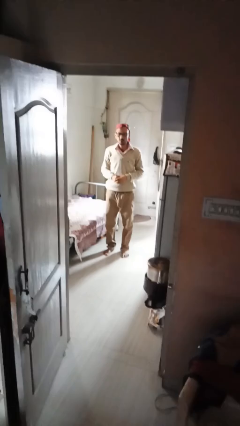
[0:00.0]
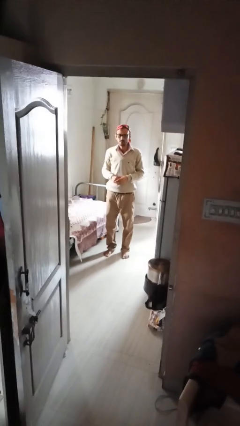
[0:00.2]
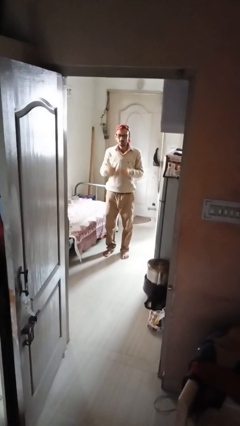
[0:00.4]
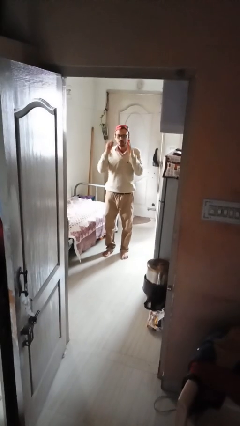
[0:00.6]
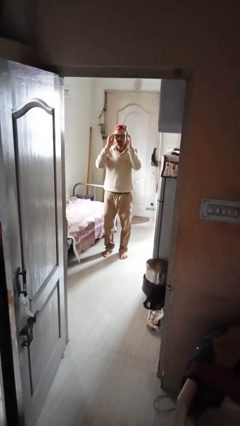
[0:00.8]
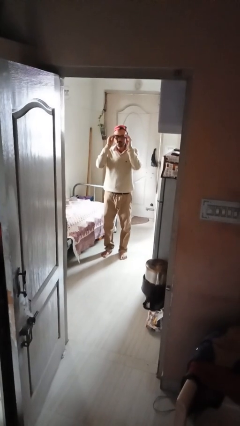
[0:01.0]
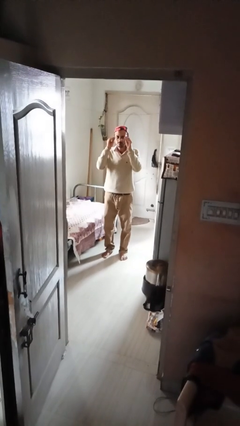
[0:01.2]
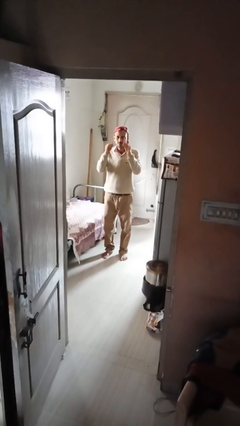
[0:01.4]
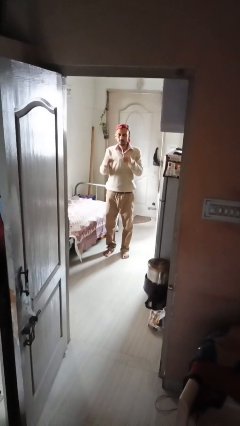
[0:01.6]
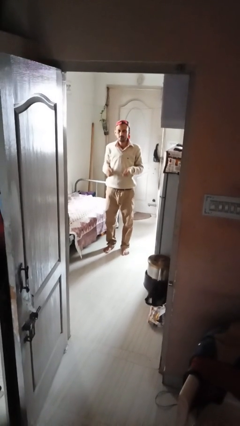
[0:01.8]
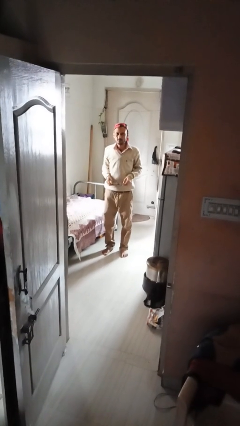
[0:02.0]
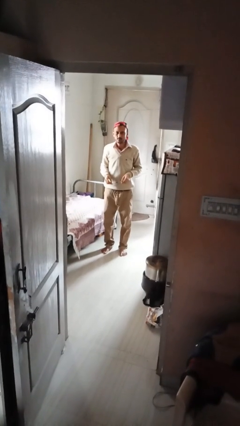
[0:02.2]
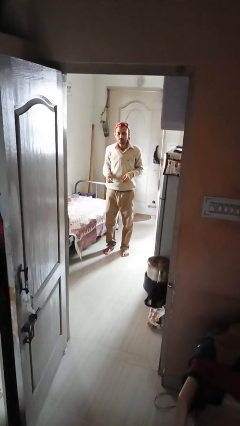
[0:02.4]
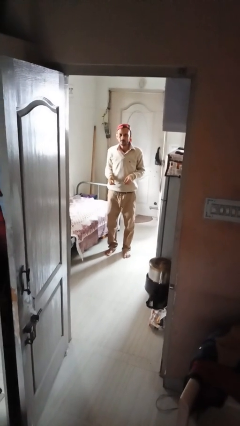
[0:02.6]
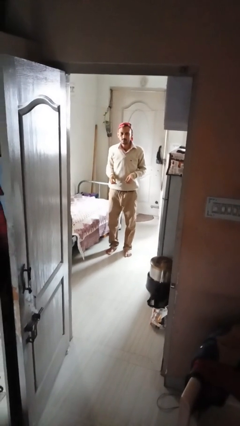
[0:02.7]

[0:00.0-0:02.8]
person takes off sunglasses

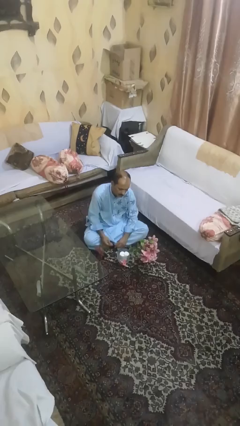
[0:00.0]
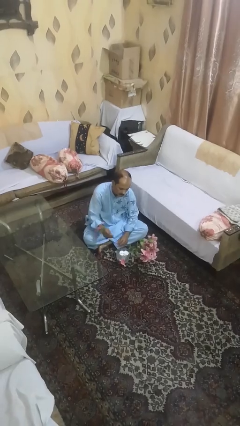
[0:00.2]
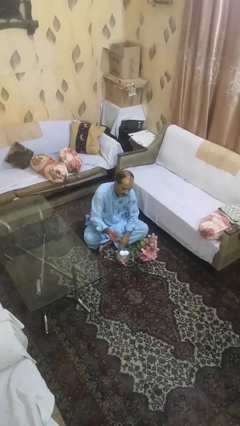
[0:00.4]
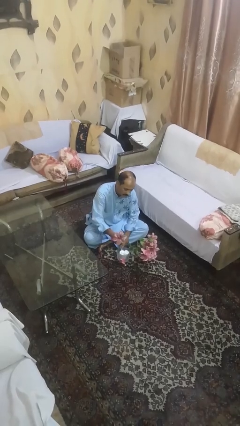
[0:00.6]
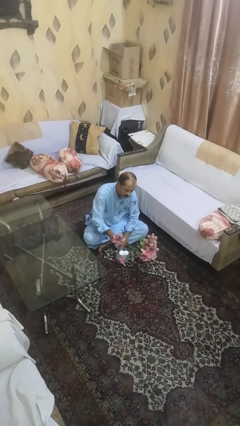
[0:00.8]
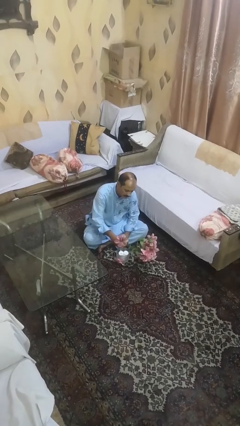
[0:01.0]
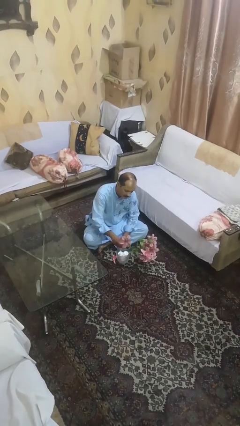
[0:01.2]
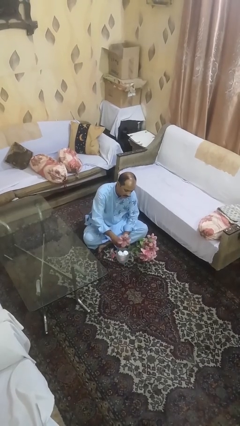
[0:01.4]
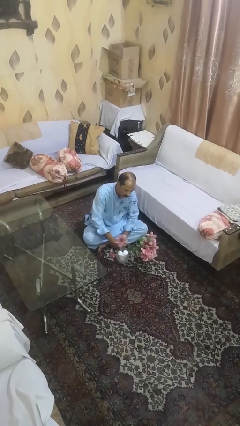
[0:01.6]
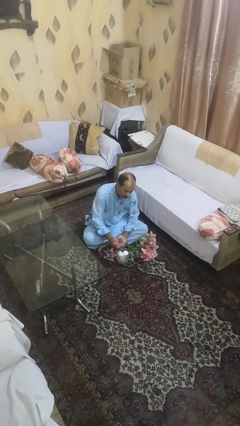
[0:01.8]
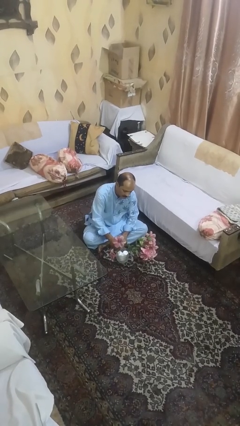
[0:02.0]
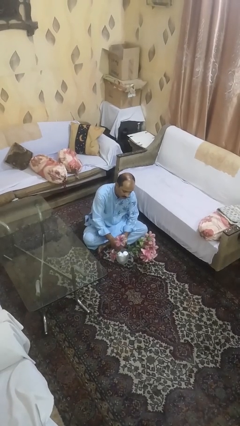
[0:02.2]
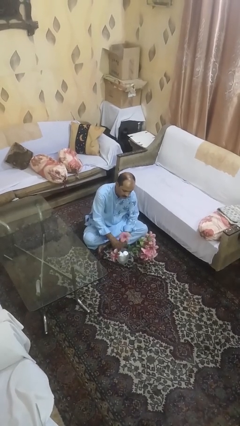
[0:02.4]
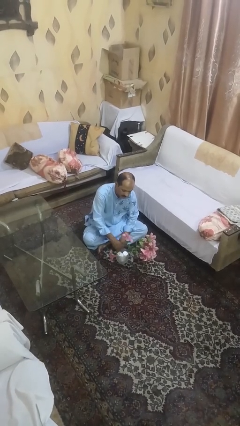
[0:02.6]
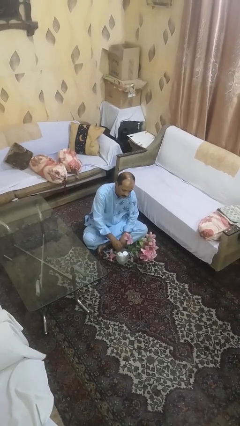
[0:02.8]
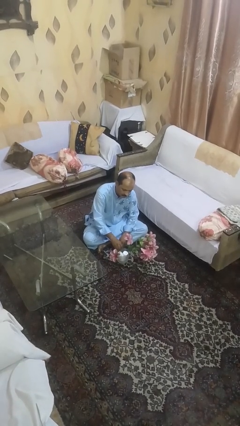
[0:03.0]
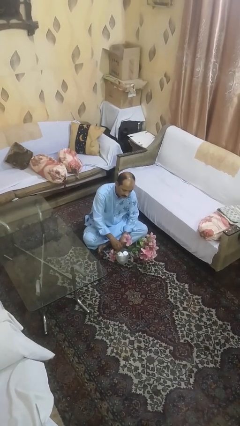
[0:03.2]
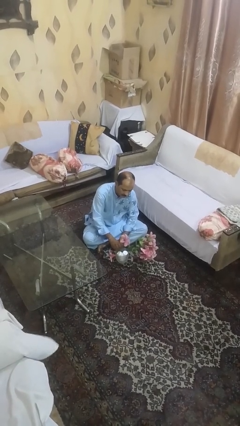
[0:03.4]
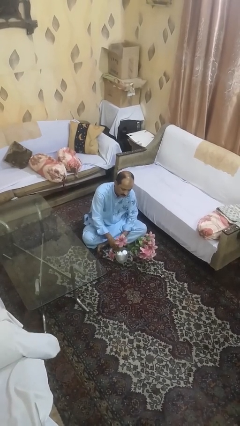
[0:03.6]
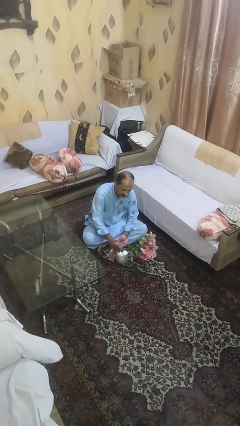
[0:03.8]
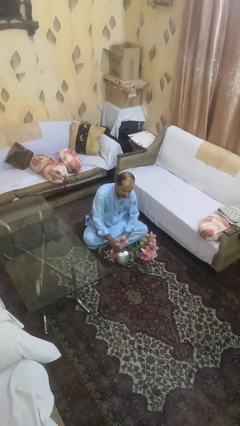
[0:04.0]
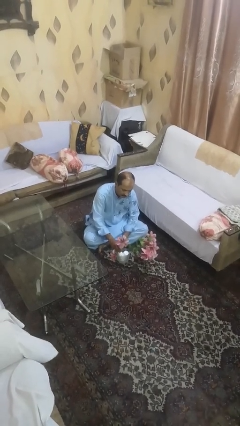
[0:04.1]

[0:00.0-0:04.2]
person arranges flowers in vase

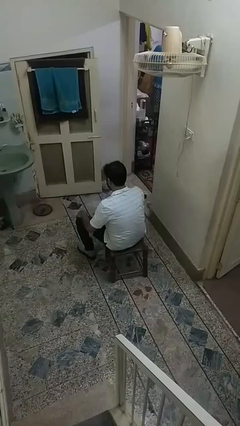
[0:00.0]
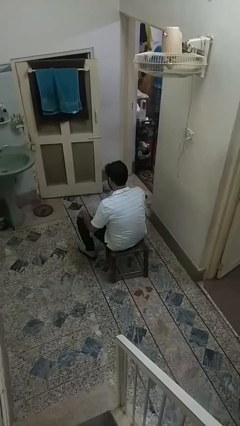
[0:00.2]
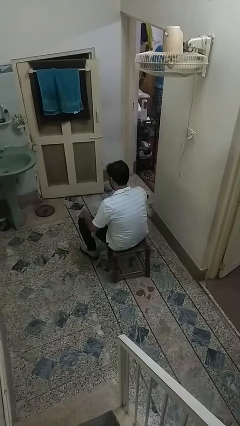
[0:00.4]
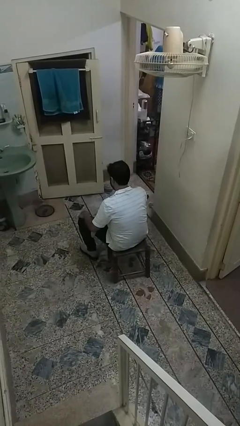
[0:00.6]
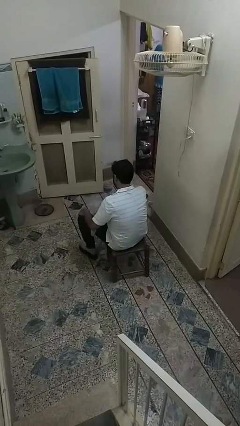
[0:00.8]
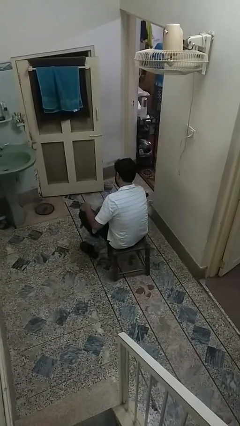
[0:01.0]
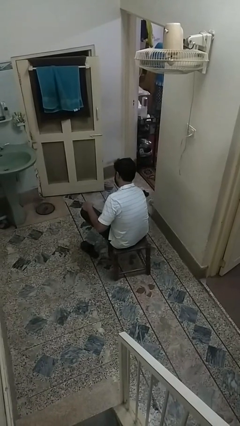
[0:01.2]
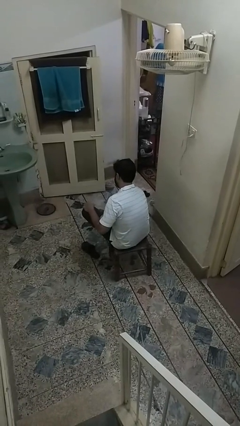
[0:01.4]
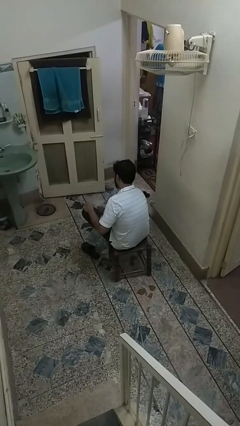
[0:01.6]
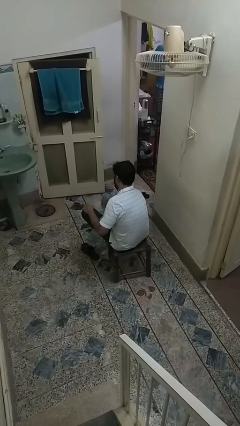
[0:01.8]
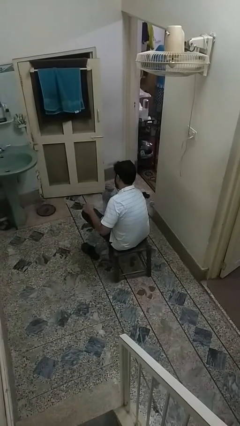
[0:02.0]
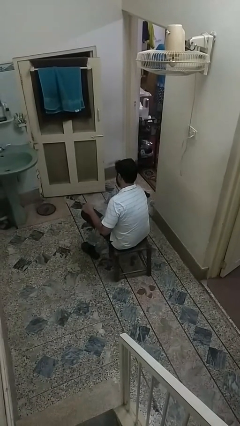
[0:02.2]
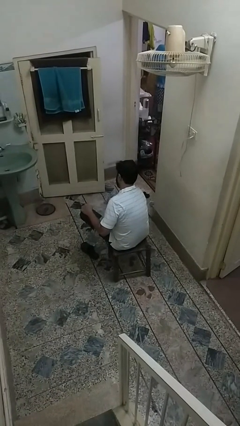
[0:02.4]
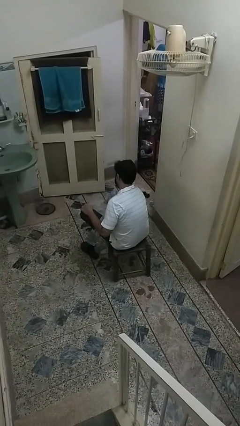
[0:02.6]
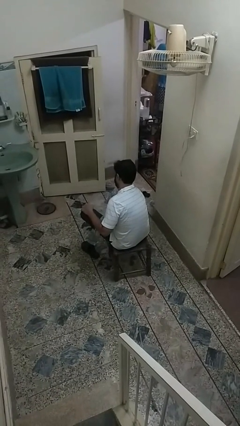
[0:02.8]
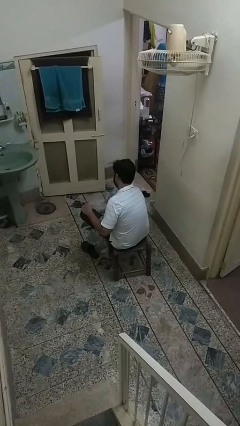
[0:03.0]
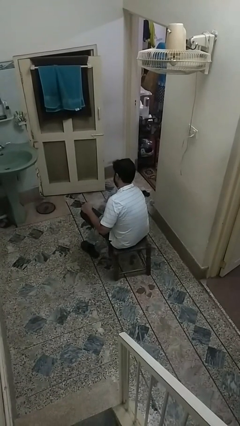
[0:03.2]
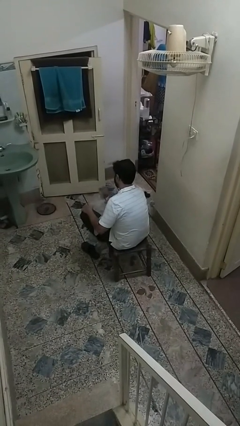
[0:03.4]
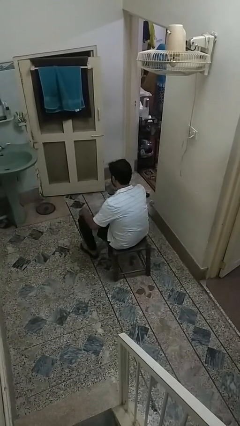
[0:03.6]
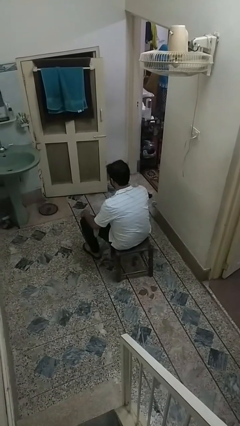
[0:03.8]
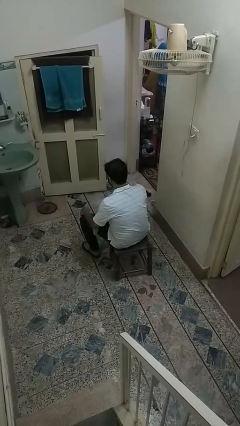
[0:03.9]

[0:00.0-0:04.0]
person takes off socks

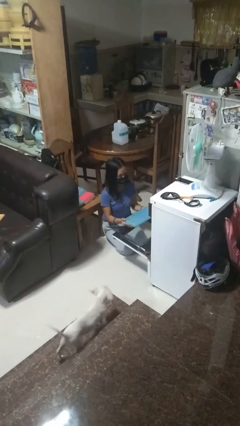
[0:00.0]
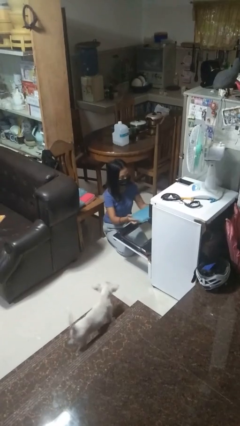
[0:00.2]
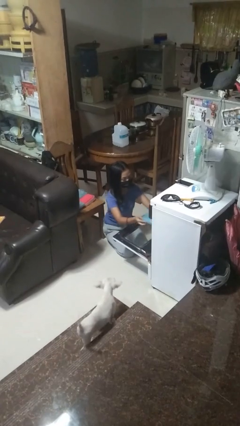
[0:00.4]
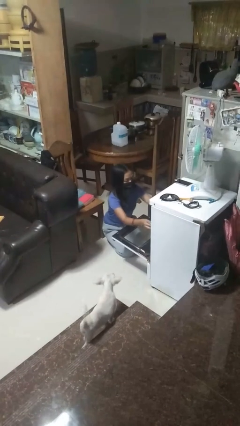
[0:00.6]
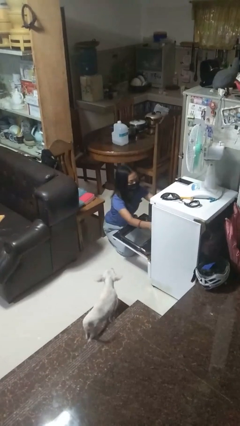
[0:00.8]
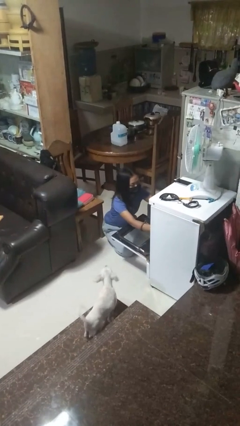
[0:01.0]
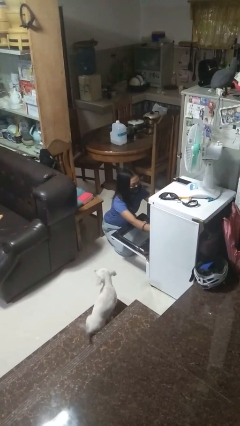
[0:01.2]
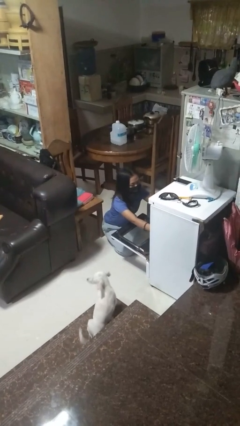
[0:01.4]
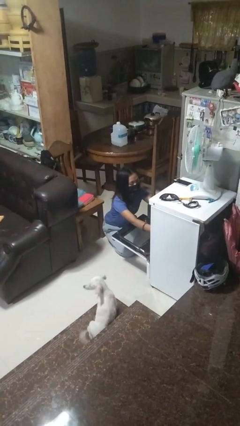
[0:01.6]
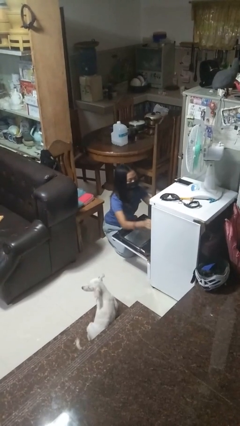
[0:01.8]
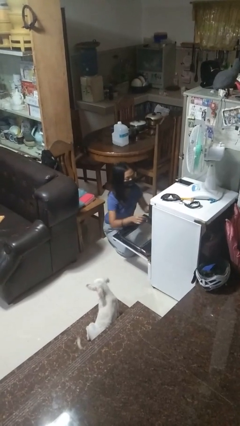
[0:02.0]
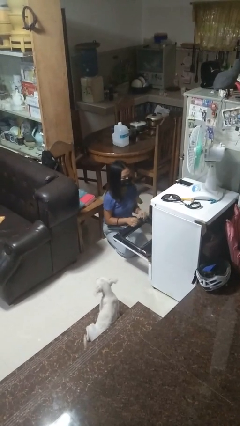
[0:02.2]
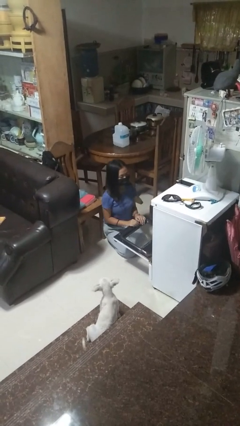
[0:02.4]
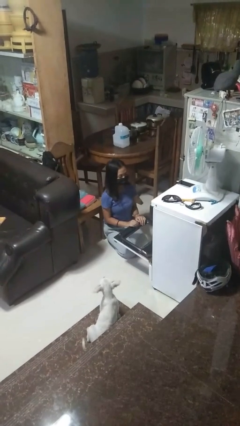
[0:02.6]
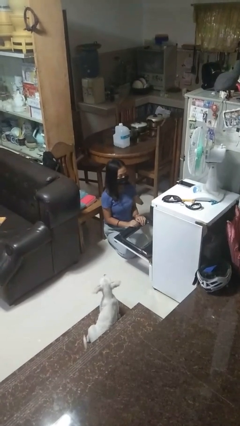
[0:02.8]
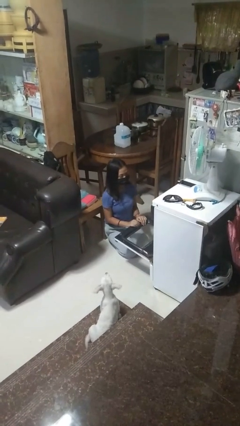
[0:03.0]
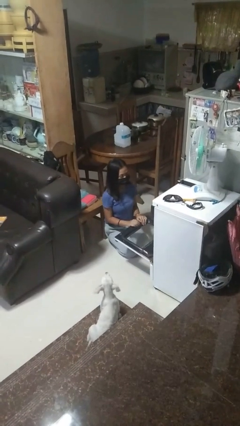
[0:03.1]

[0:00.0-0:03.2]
person puts object into oven

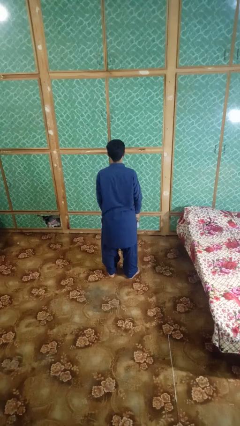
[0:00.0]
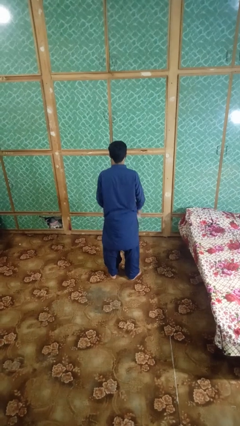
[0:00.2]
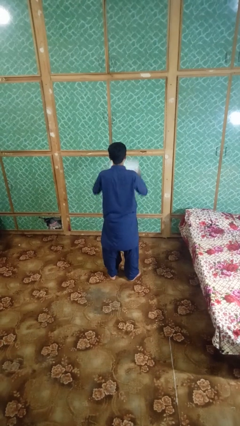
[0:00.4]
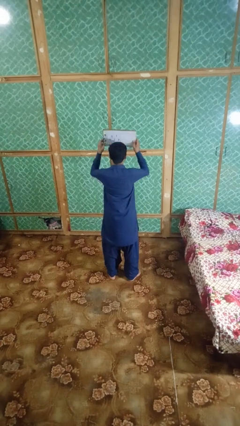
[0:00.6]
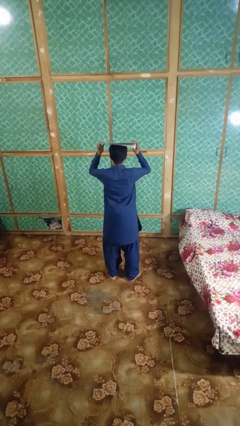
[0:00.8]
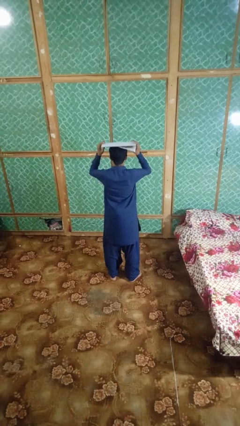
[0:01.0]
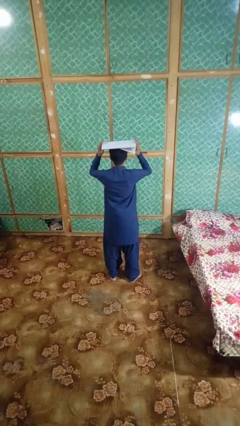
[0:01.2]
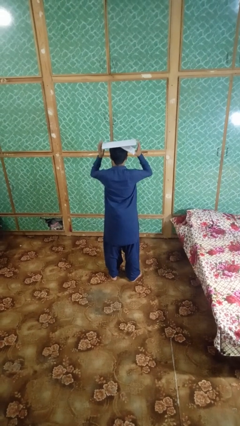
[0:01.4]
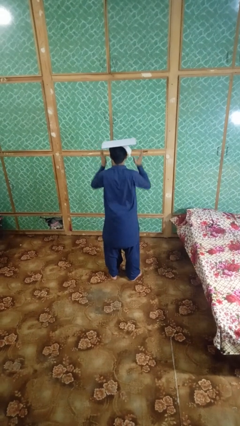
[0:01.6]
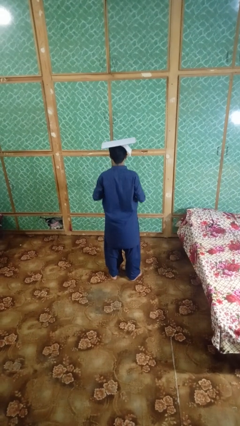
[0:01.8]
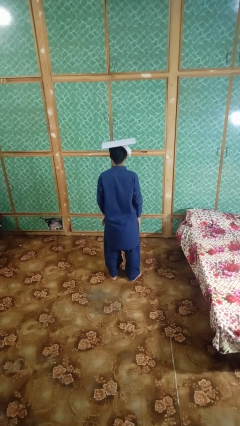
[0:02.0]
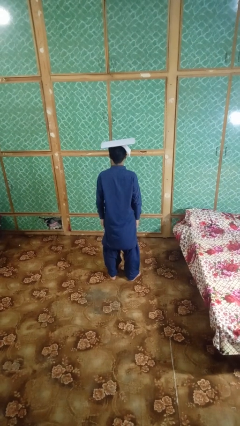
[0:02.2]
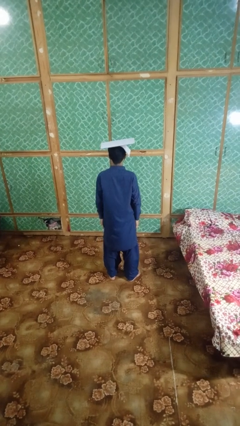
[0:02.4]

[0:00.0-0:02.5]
person holds object above head

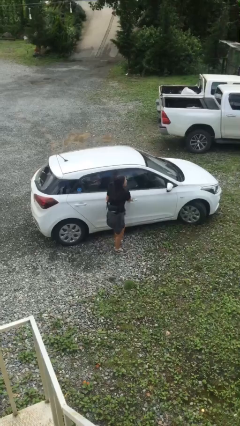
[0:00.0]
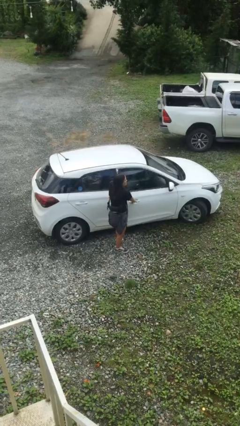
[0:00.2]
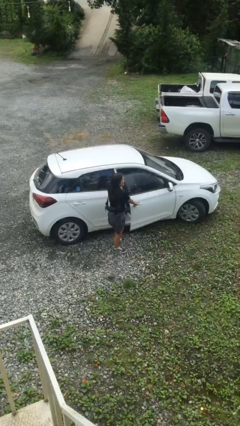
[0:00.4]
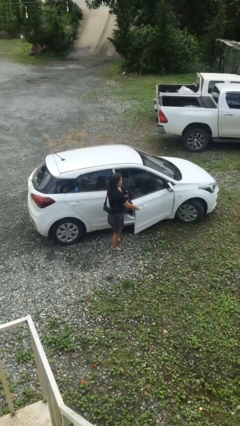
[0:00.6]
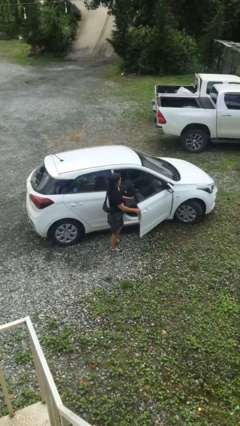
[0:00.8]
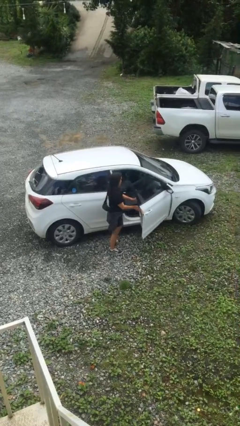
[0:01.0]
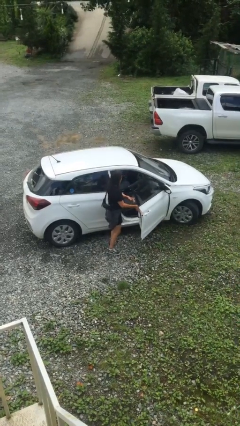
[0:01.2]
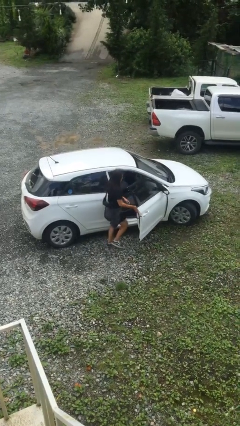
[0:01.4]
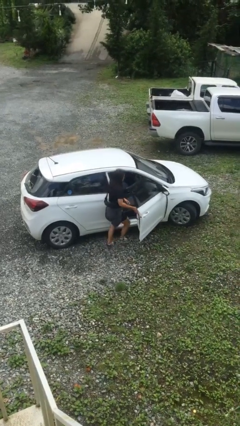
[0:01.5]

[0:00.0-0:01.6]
person opens car door
